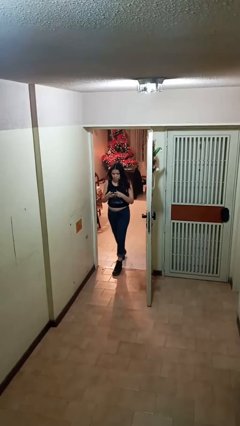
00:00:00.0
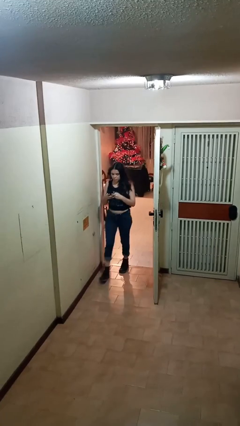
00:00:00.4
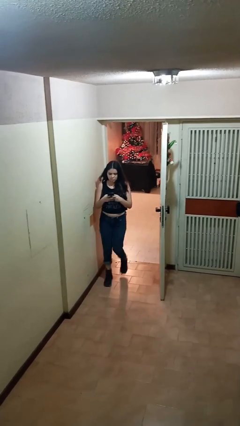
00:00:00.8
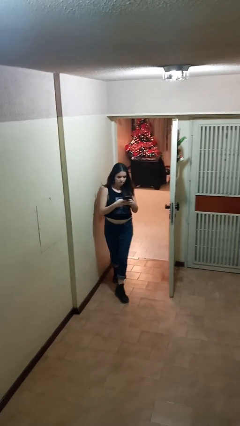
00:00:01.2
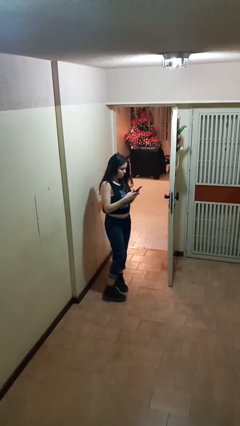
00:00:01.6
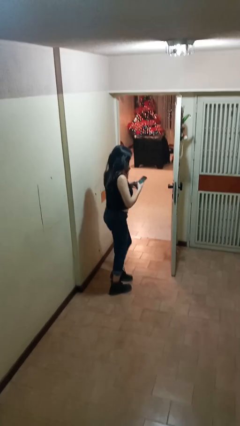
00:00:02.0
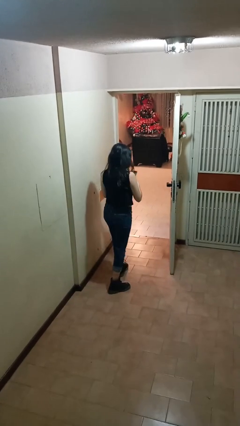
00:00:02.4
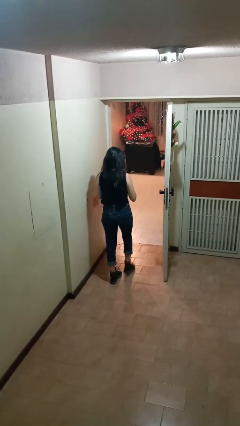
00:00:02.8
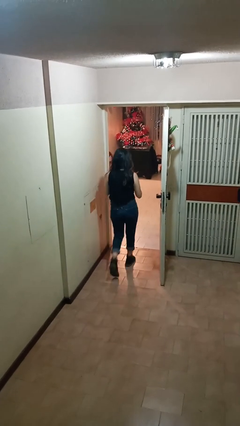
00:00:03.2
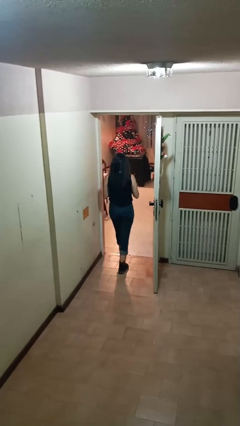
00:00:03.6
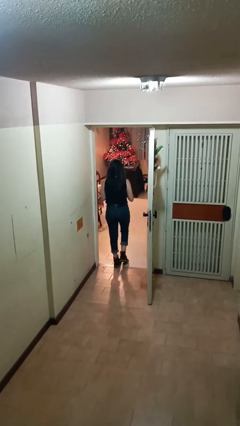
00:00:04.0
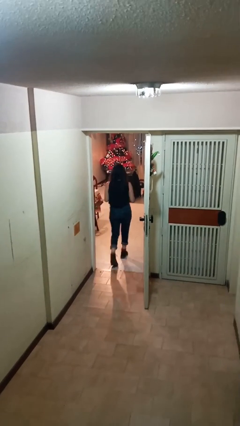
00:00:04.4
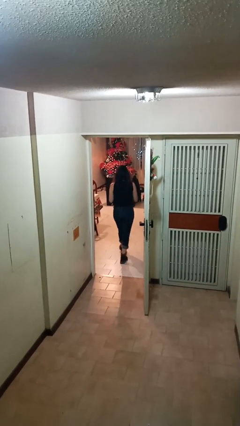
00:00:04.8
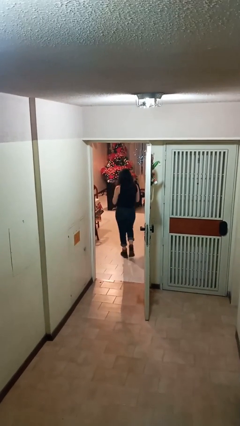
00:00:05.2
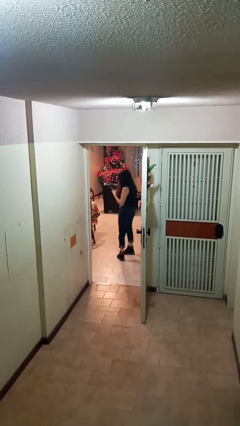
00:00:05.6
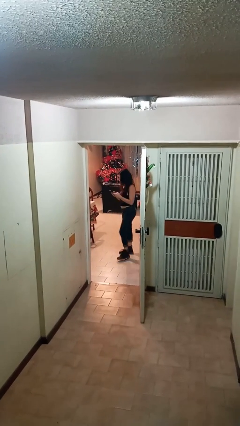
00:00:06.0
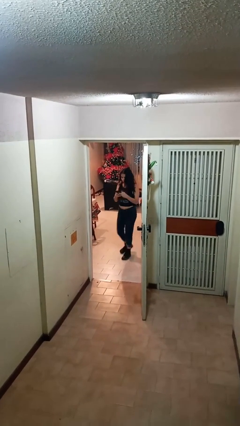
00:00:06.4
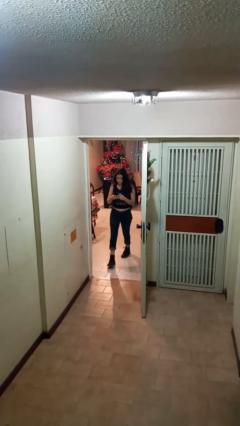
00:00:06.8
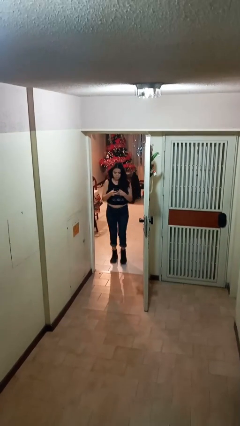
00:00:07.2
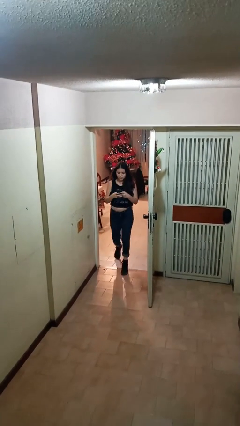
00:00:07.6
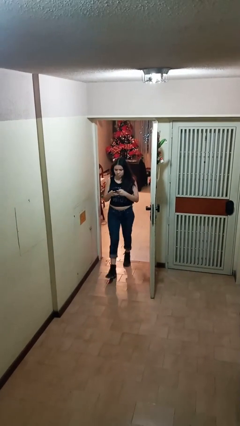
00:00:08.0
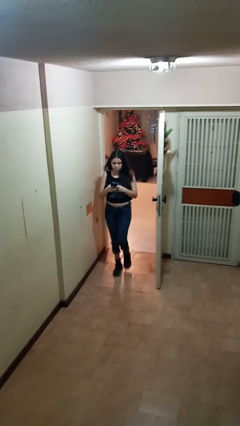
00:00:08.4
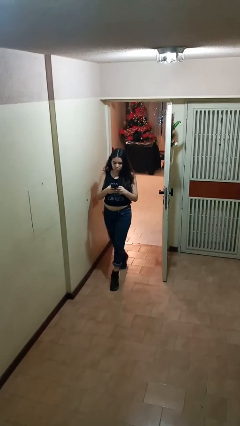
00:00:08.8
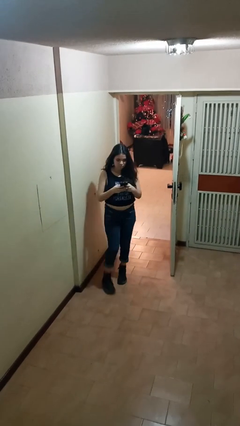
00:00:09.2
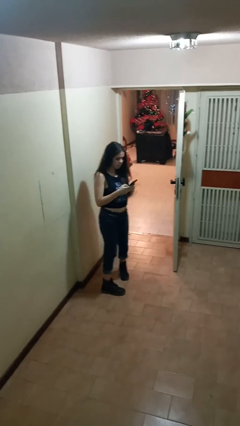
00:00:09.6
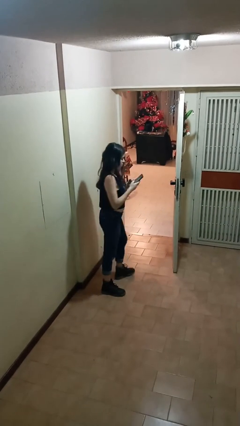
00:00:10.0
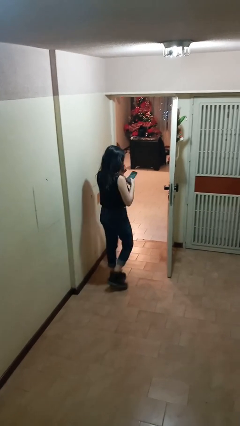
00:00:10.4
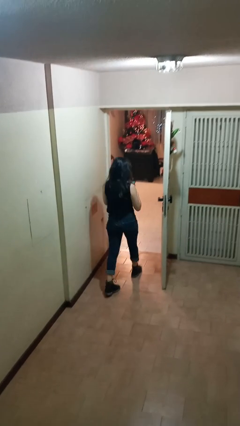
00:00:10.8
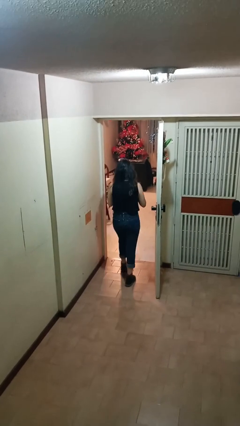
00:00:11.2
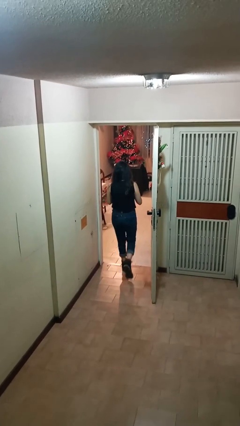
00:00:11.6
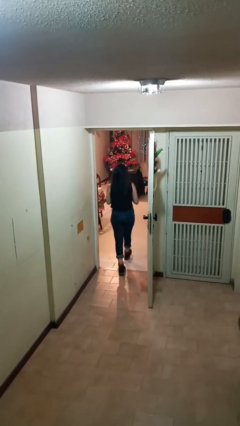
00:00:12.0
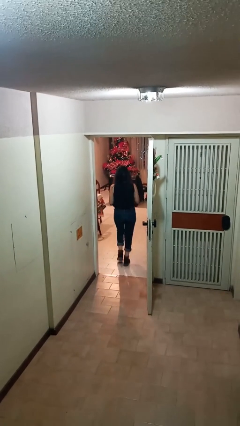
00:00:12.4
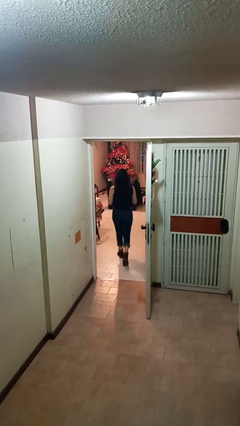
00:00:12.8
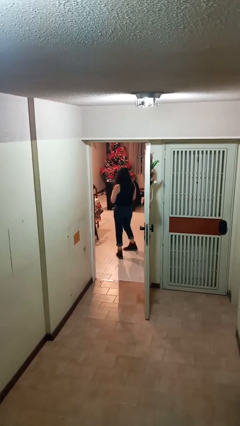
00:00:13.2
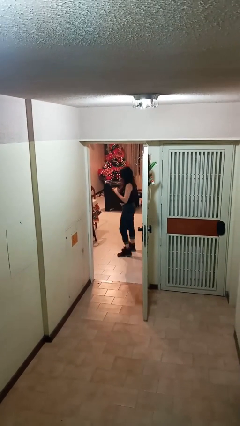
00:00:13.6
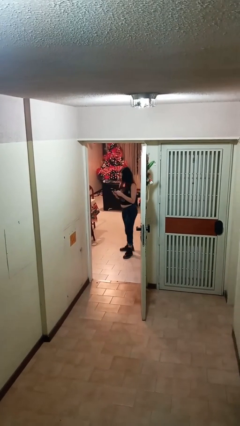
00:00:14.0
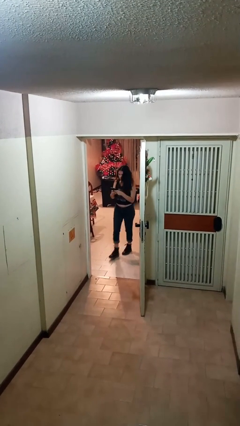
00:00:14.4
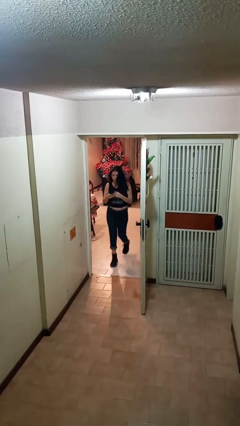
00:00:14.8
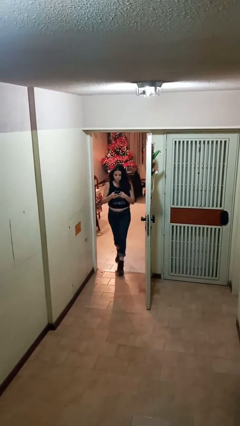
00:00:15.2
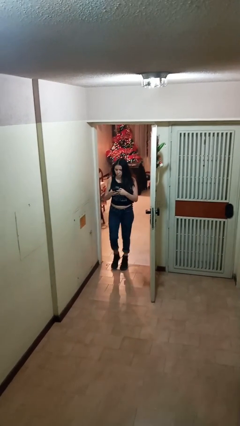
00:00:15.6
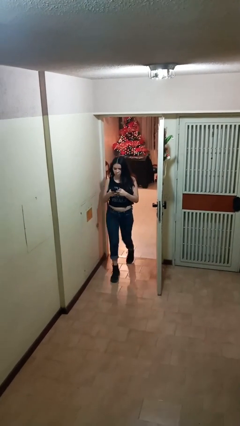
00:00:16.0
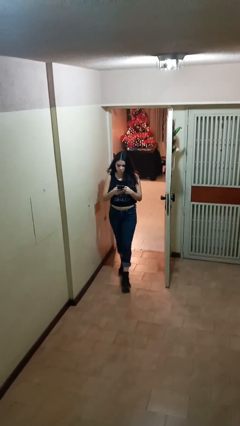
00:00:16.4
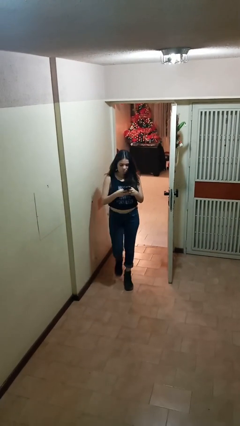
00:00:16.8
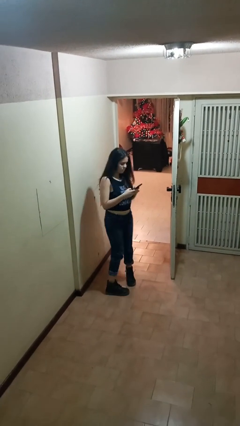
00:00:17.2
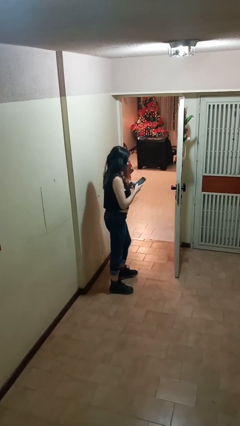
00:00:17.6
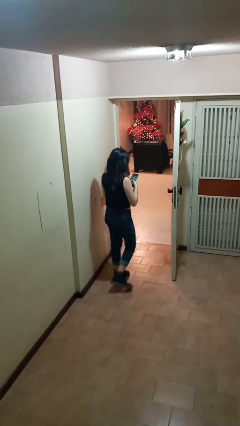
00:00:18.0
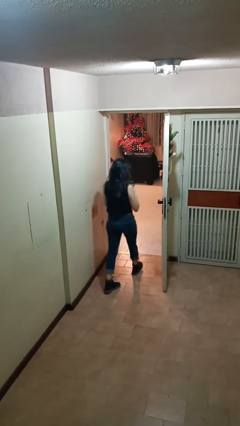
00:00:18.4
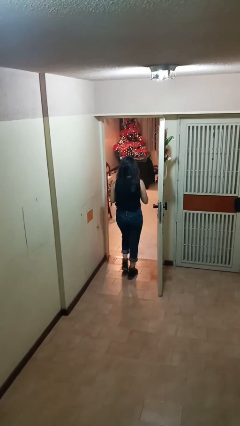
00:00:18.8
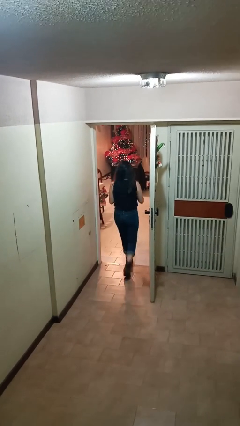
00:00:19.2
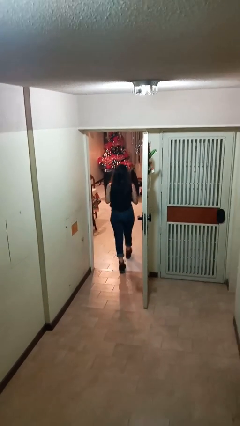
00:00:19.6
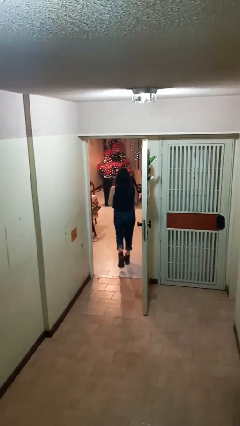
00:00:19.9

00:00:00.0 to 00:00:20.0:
person texts on phone

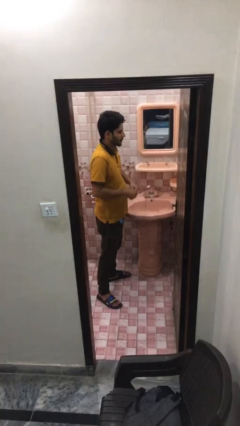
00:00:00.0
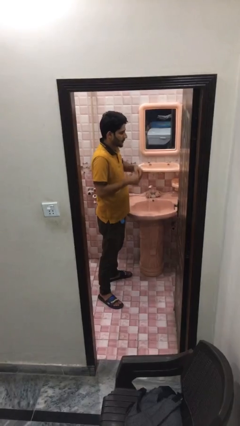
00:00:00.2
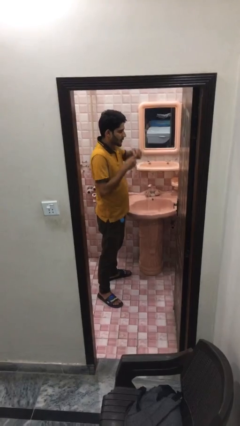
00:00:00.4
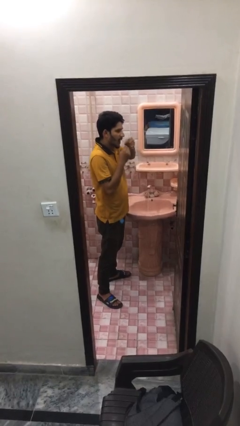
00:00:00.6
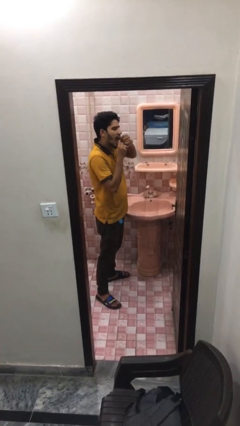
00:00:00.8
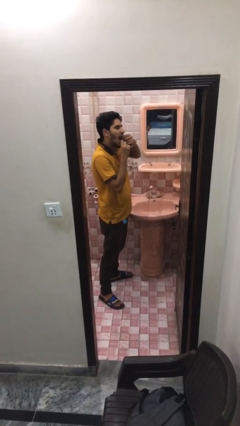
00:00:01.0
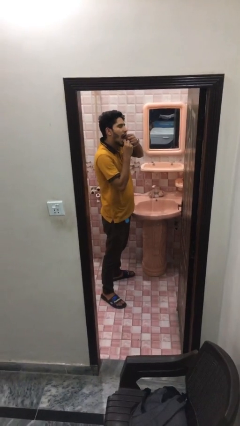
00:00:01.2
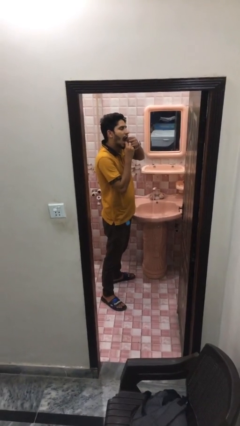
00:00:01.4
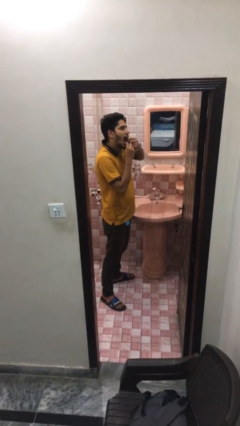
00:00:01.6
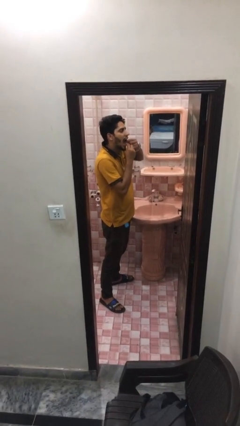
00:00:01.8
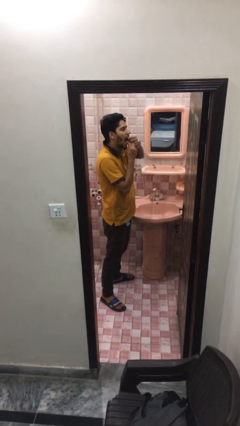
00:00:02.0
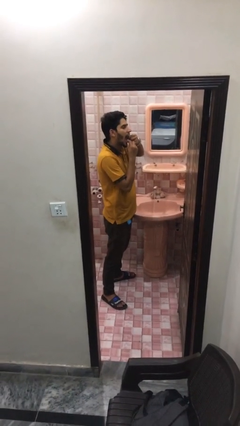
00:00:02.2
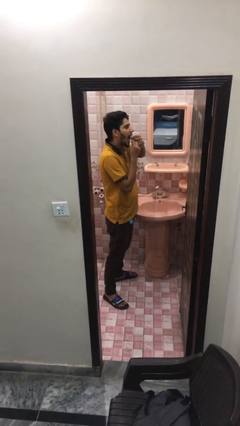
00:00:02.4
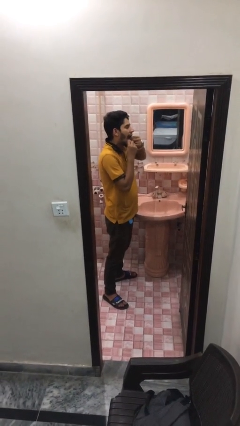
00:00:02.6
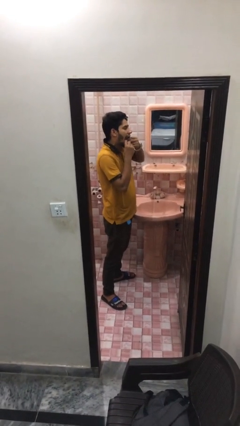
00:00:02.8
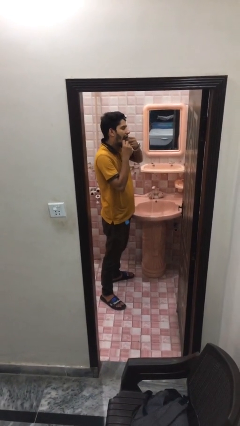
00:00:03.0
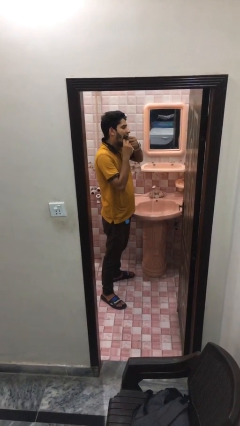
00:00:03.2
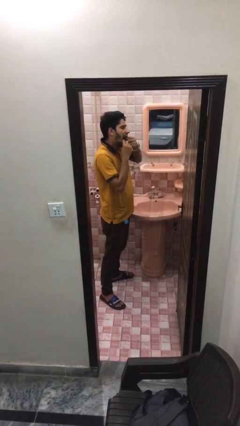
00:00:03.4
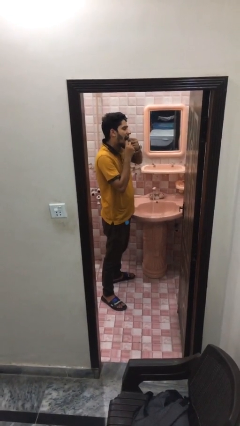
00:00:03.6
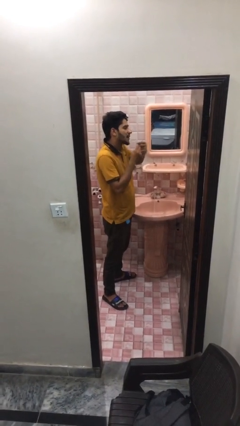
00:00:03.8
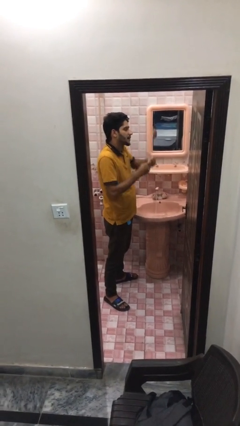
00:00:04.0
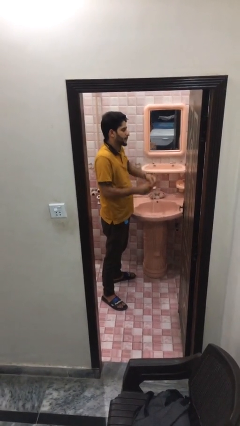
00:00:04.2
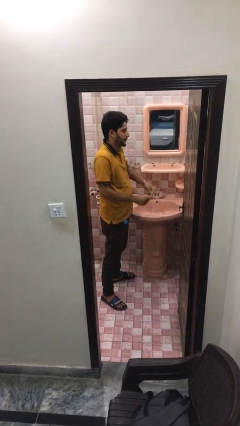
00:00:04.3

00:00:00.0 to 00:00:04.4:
person flosses

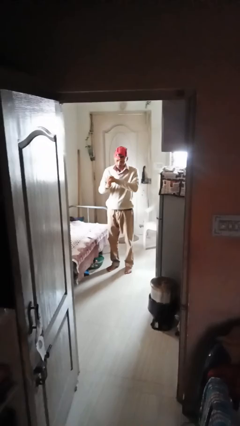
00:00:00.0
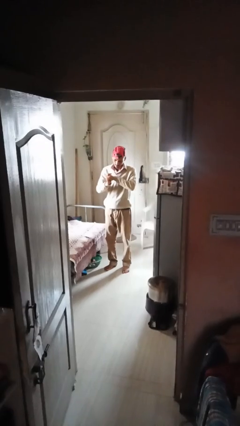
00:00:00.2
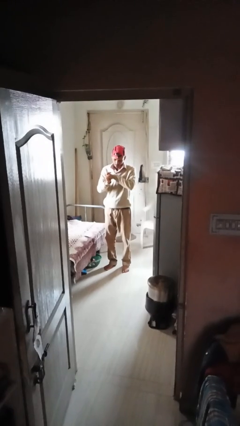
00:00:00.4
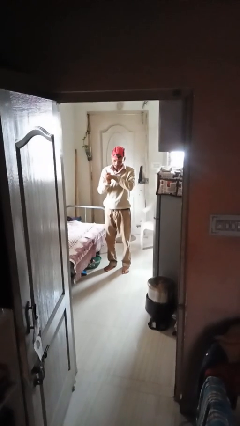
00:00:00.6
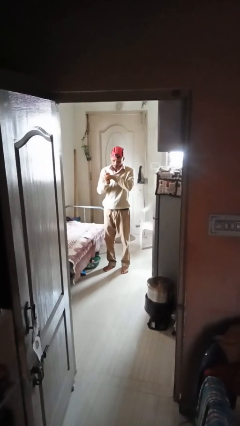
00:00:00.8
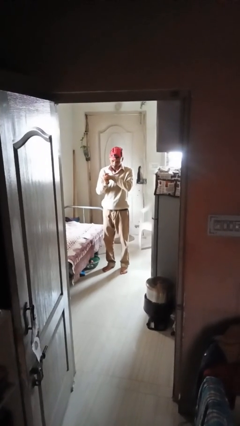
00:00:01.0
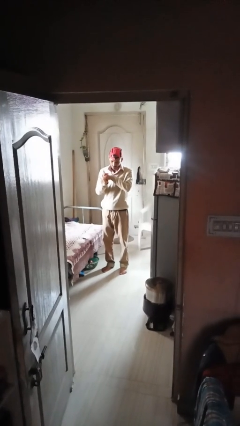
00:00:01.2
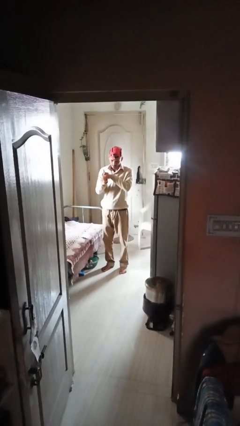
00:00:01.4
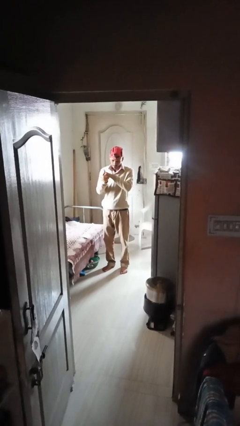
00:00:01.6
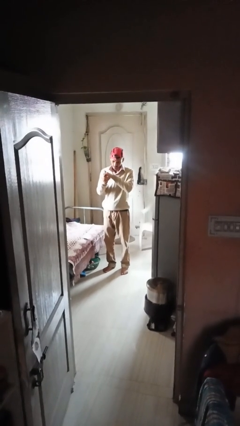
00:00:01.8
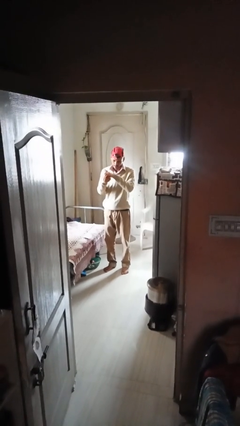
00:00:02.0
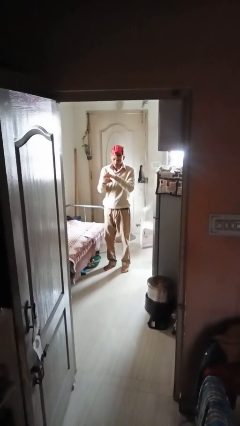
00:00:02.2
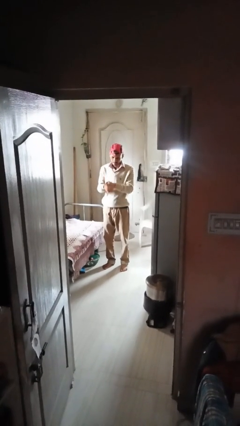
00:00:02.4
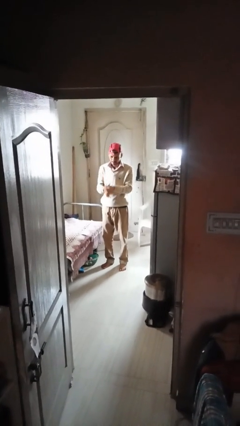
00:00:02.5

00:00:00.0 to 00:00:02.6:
person cracks knuckles

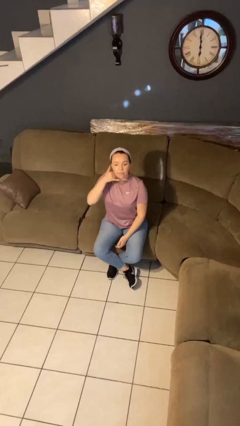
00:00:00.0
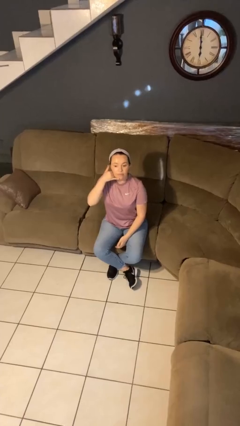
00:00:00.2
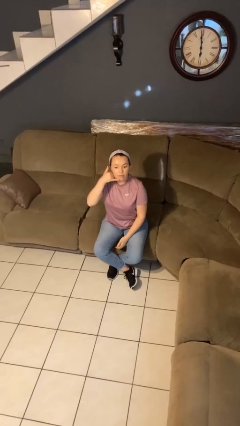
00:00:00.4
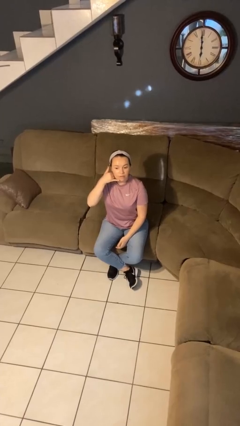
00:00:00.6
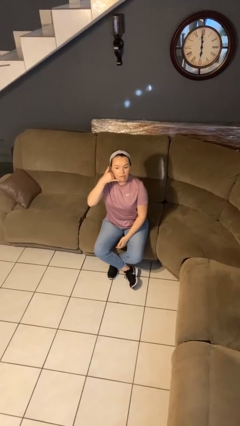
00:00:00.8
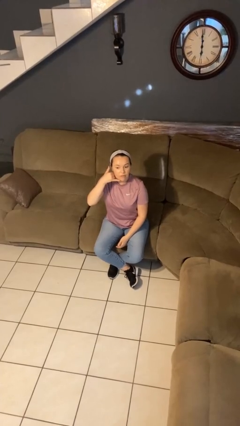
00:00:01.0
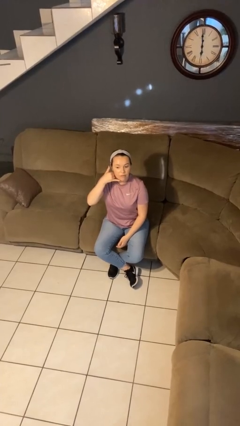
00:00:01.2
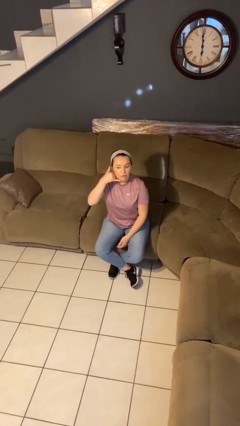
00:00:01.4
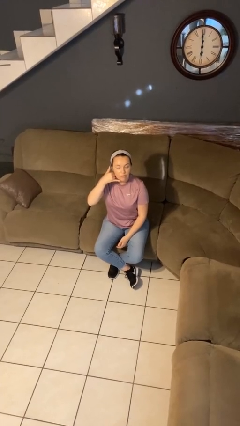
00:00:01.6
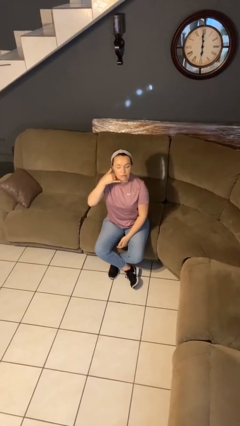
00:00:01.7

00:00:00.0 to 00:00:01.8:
person gestures call me
